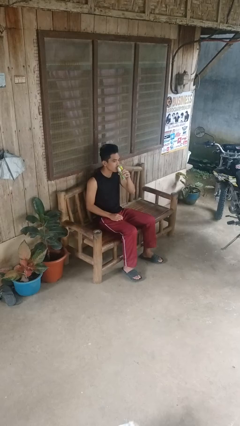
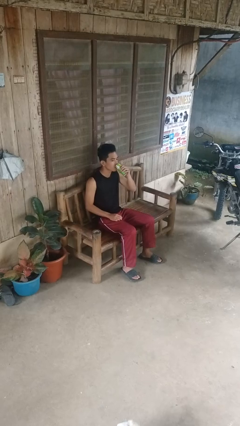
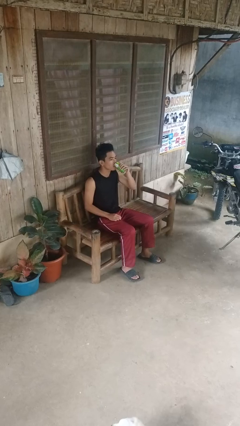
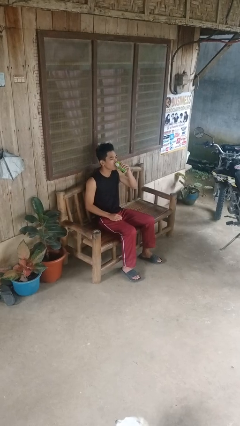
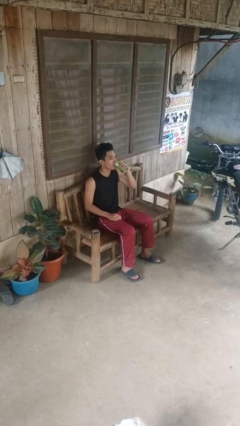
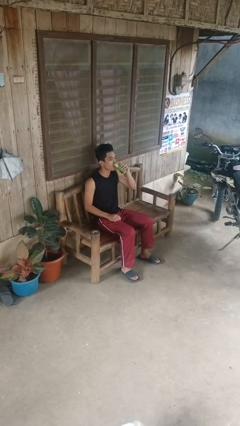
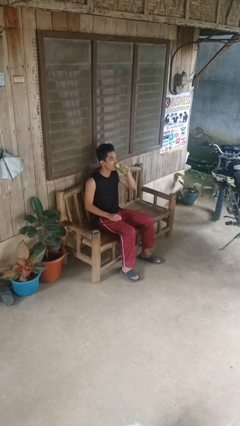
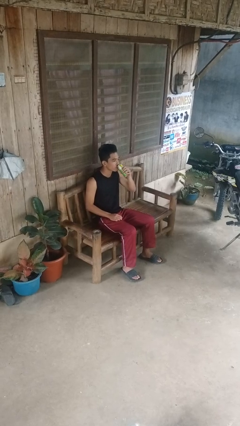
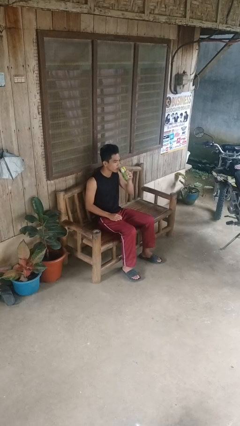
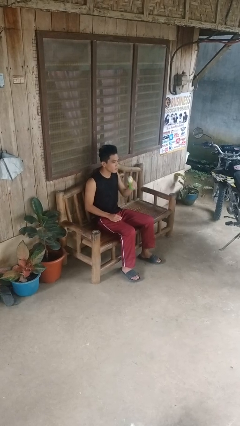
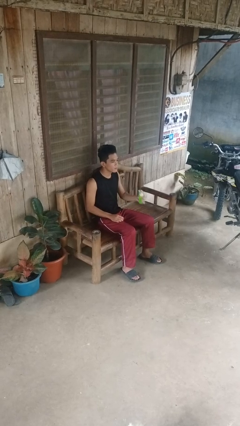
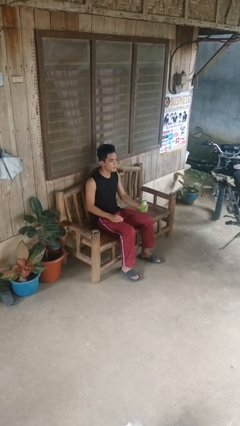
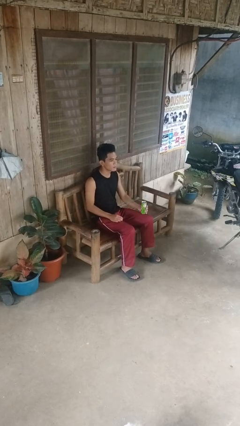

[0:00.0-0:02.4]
person drinks from beverage can

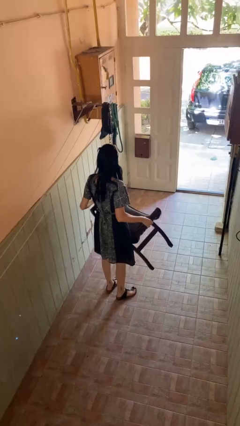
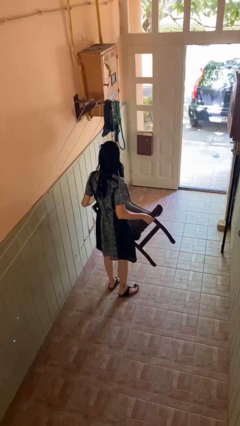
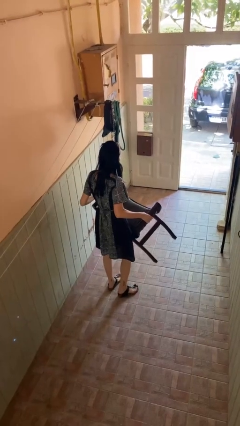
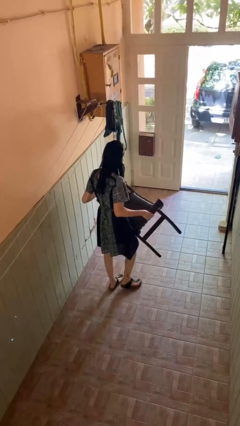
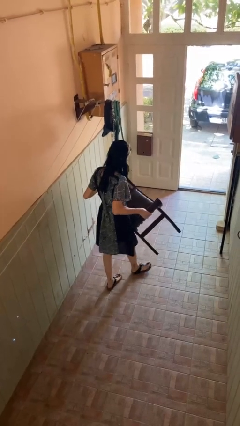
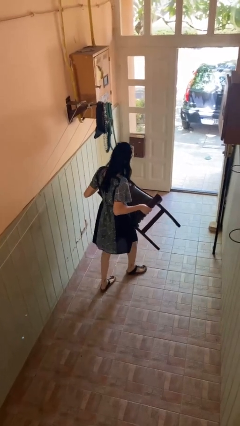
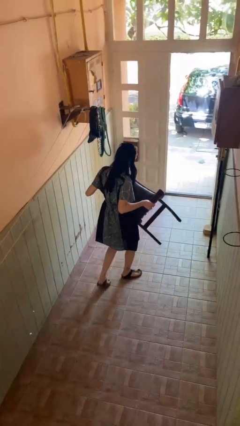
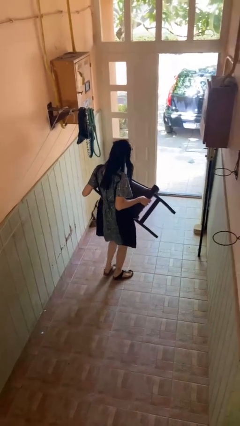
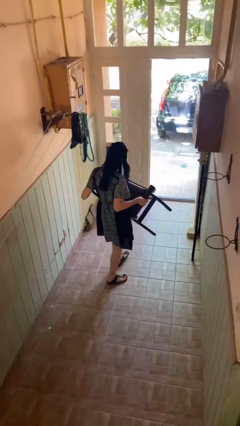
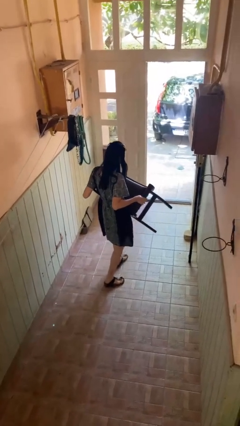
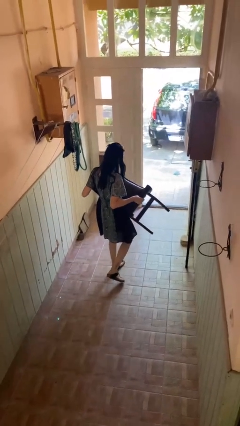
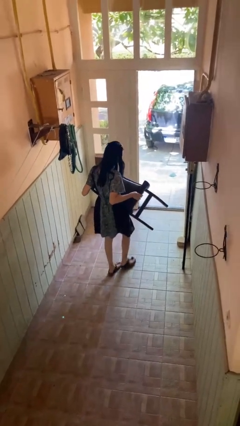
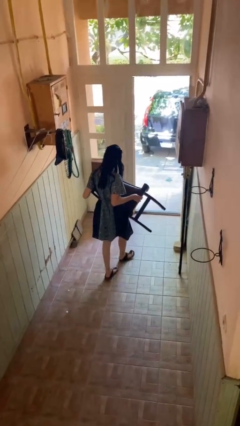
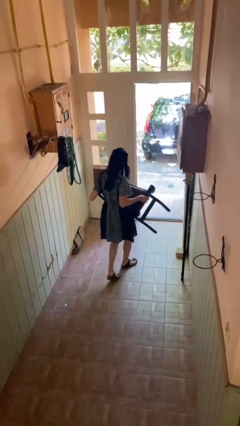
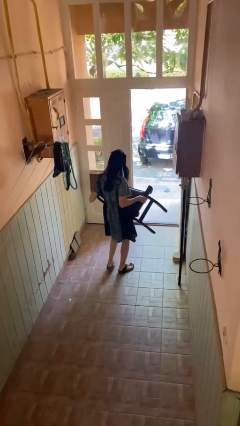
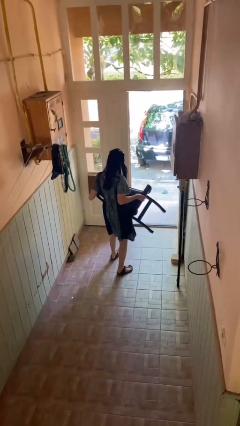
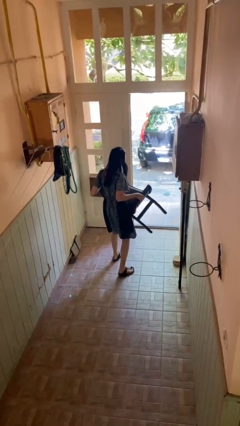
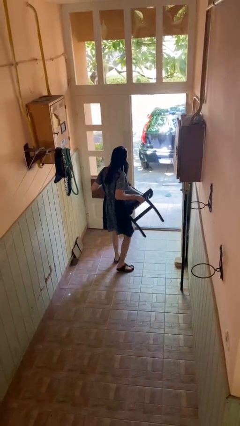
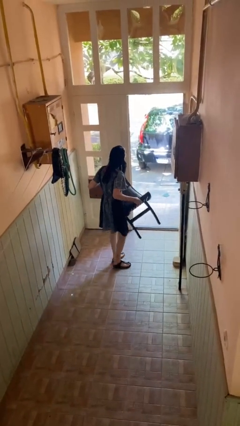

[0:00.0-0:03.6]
person carries furniture

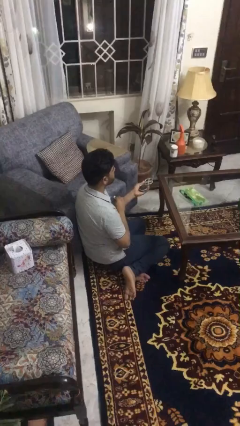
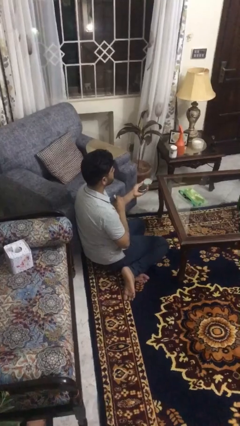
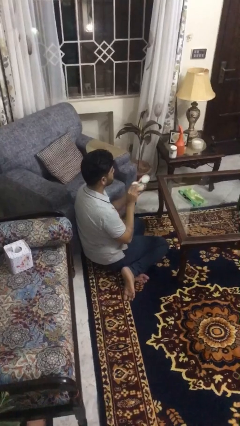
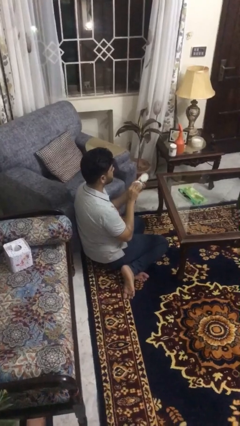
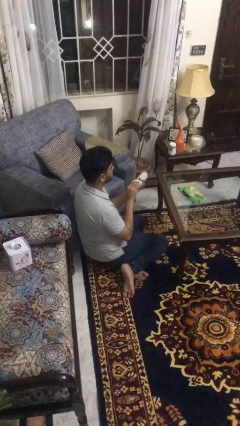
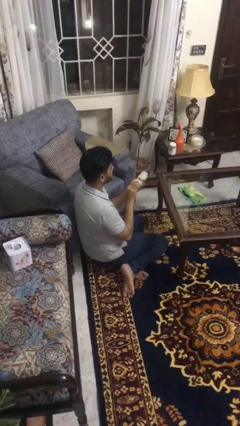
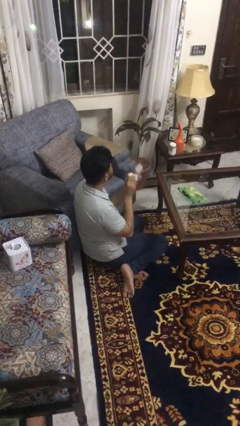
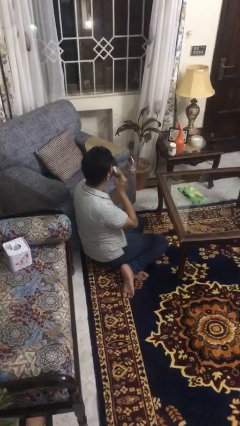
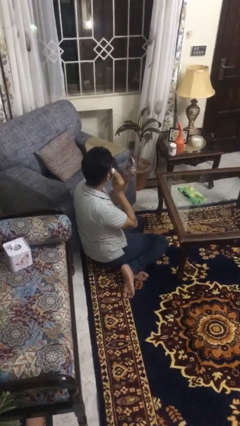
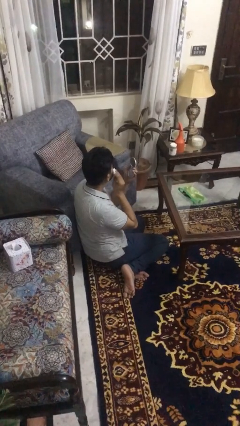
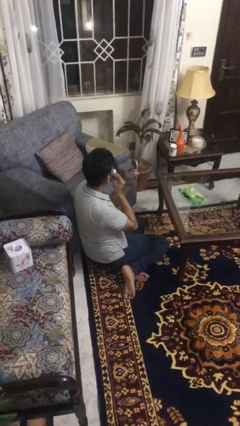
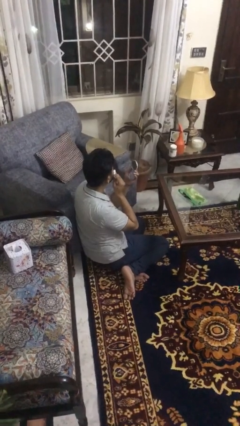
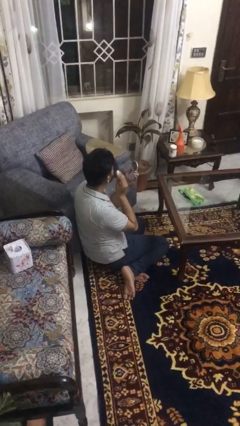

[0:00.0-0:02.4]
person applies foundation makeup

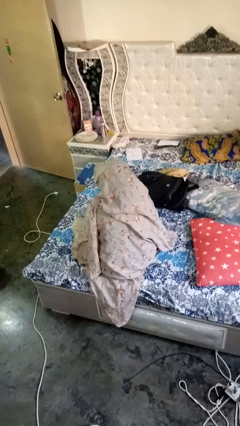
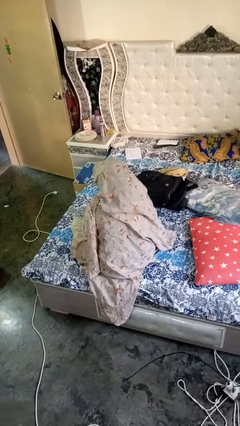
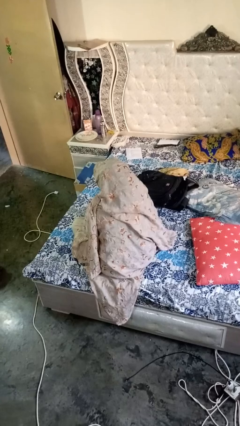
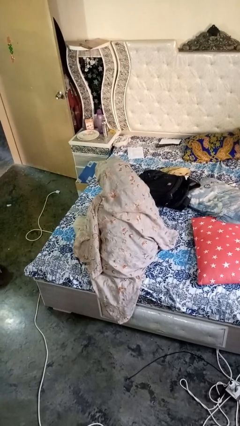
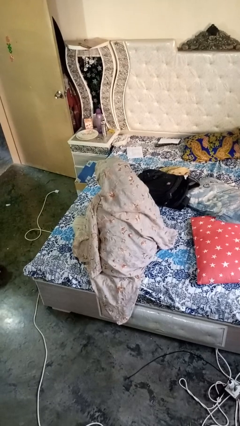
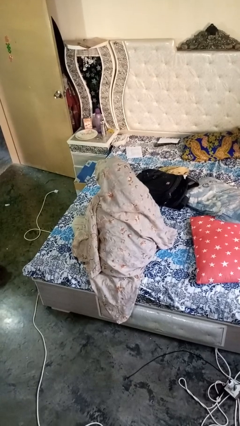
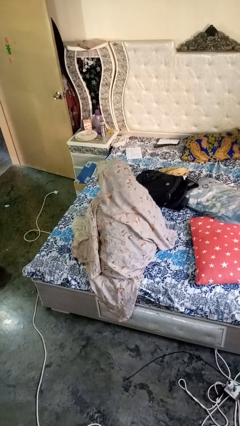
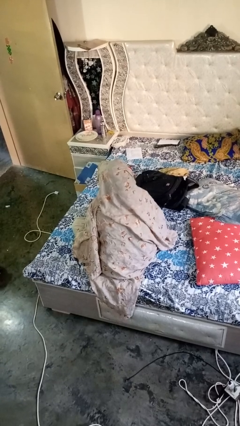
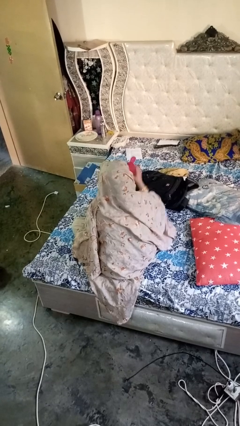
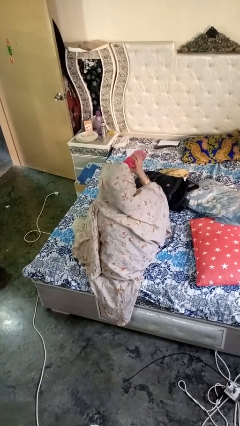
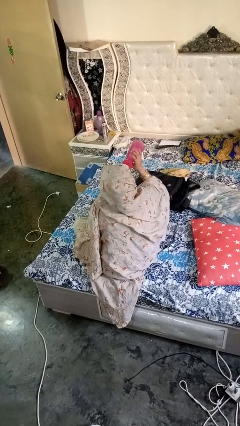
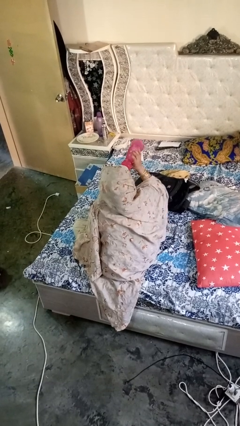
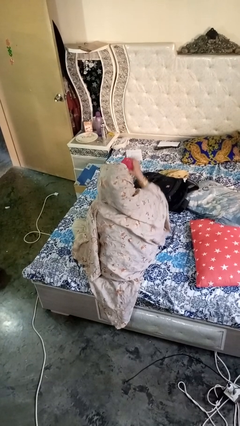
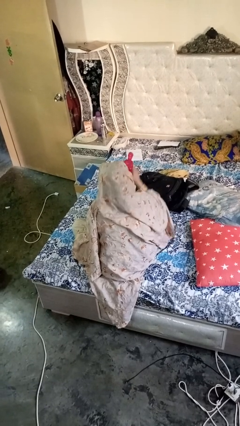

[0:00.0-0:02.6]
person drinks from bottle

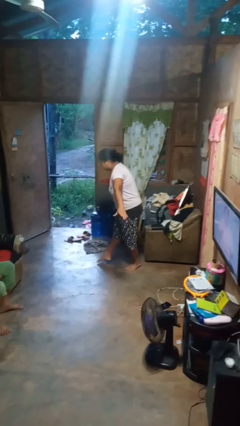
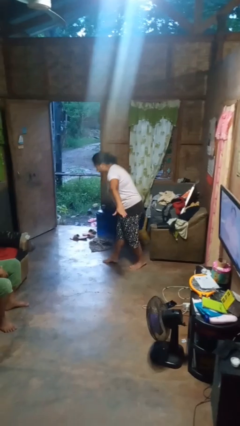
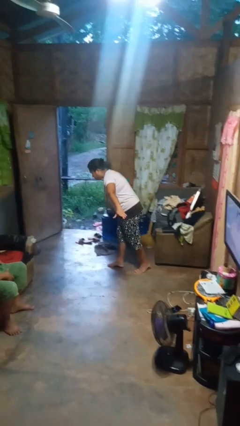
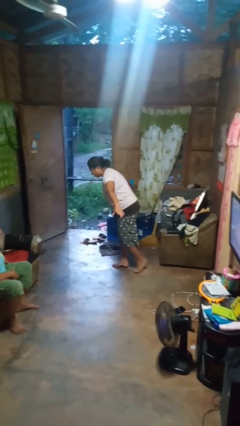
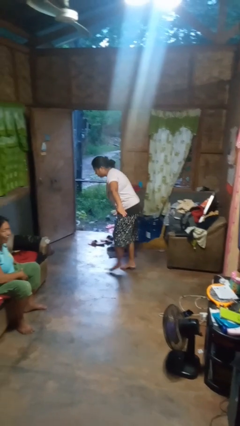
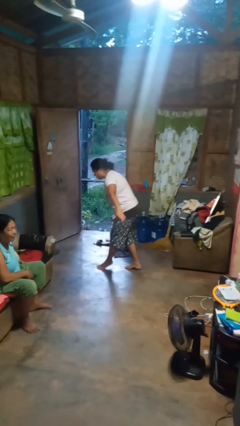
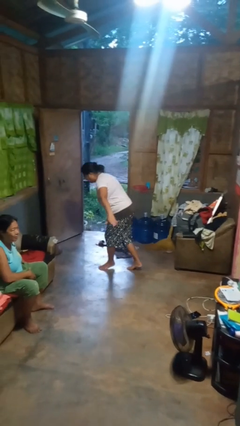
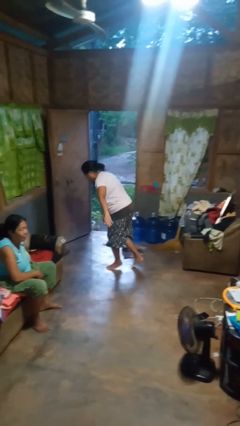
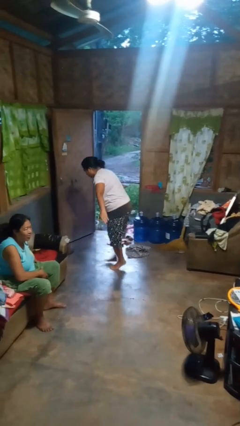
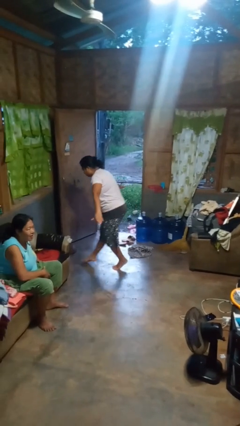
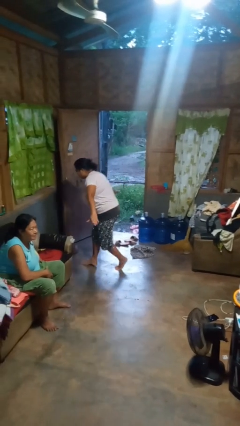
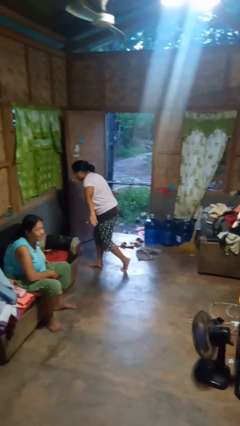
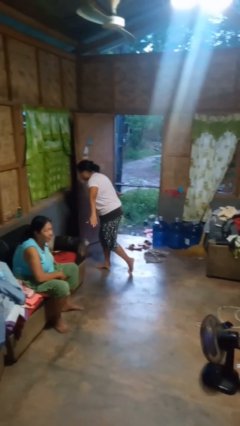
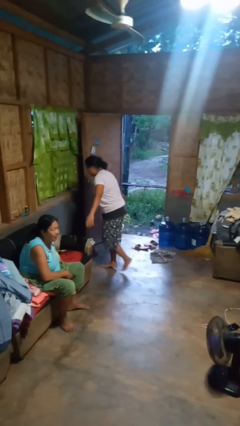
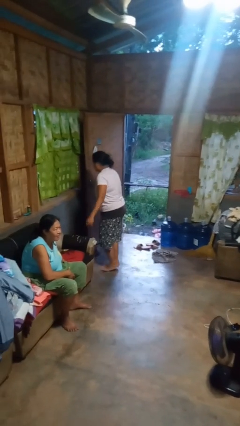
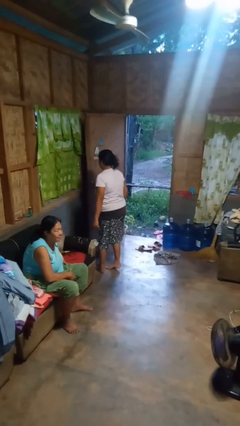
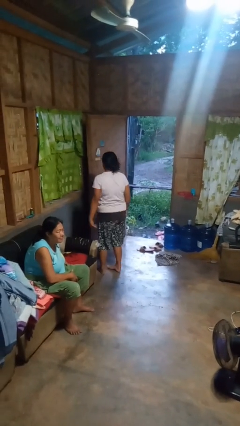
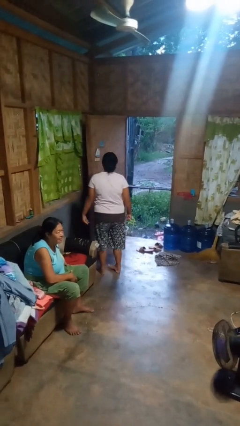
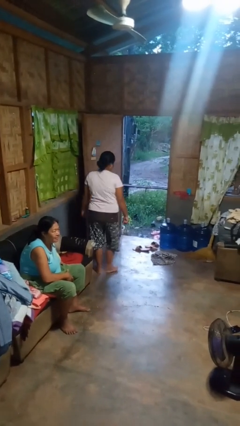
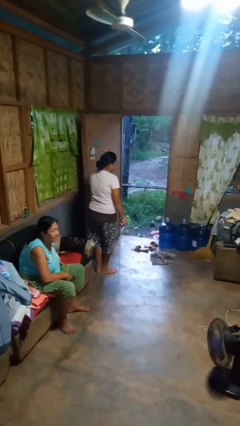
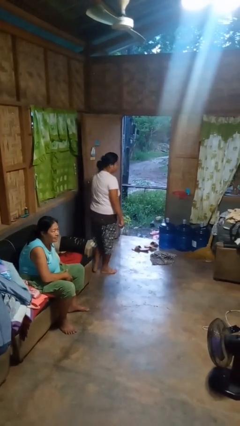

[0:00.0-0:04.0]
person walks tiptoe

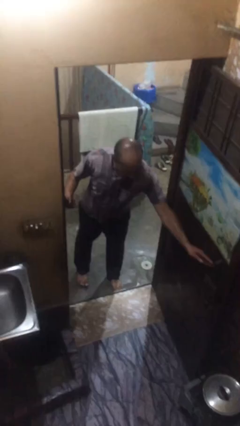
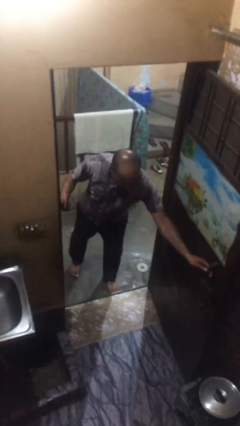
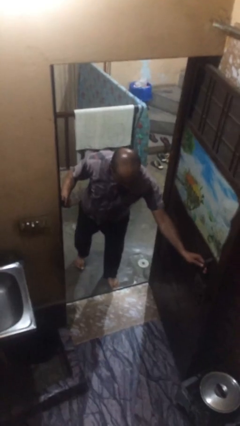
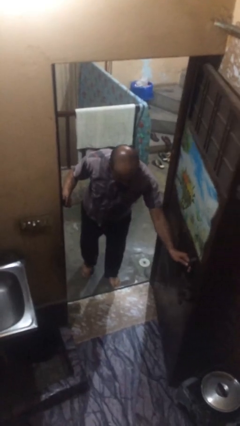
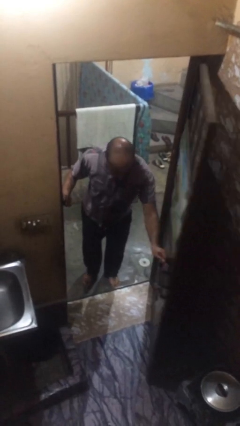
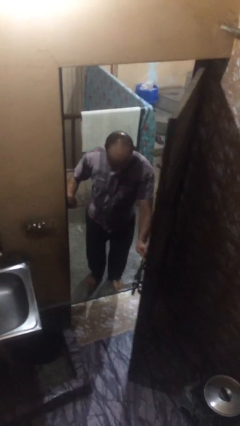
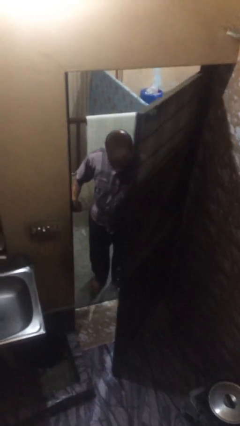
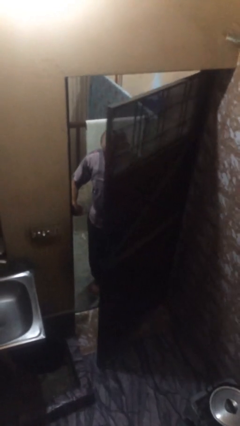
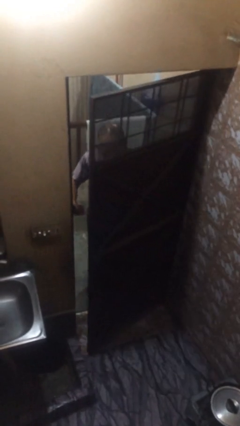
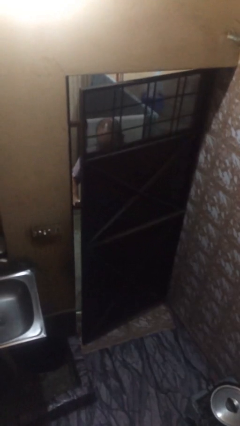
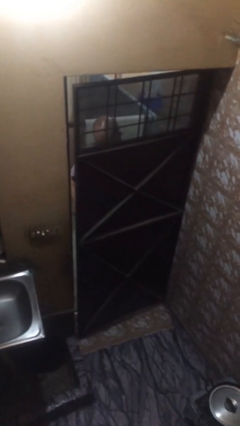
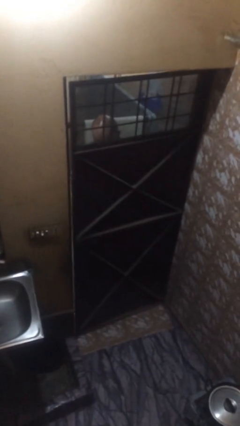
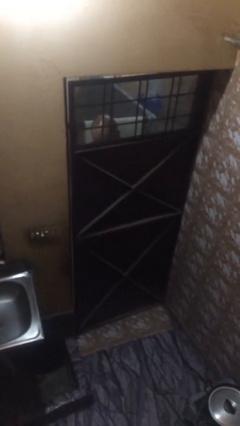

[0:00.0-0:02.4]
person closes facility door
